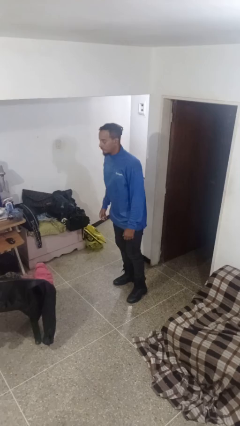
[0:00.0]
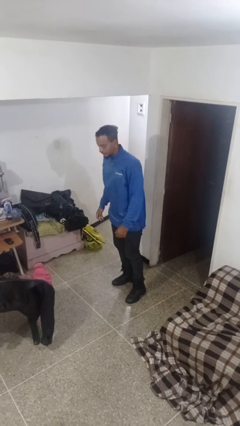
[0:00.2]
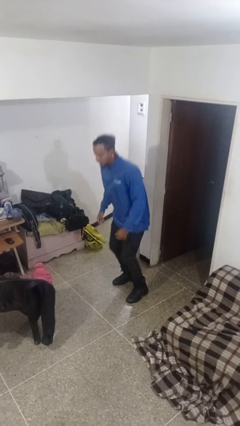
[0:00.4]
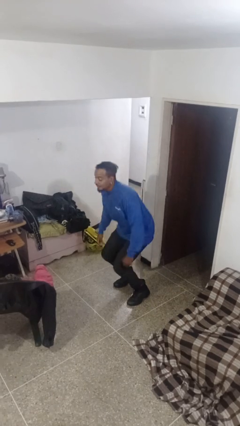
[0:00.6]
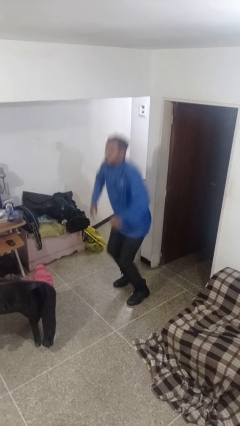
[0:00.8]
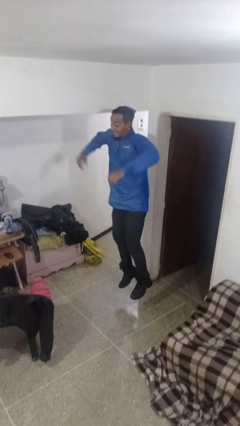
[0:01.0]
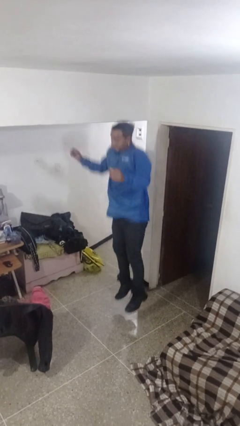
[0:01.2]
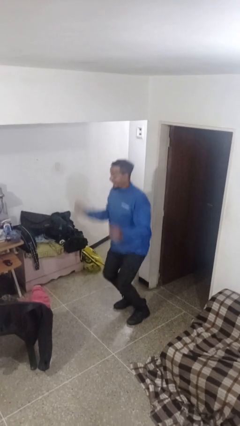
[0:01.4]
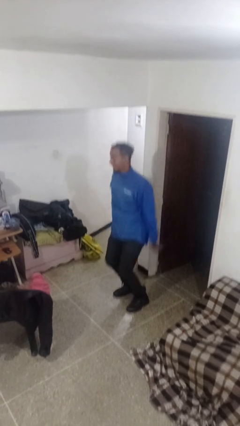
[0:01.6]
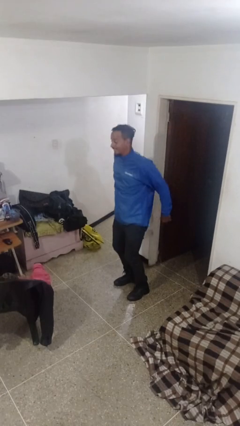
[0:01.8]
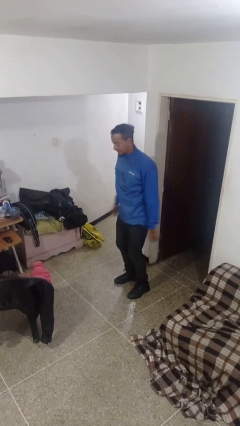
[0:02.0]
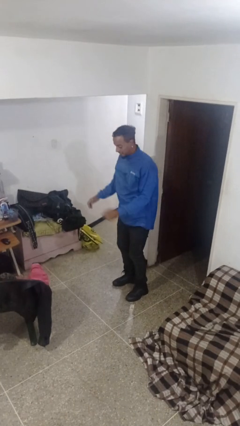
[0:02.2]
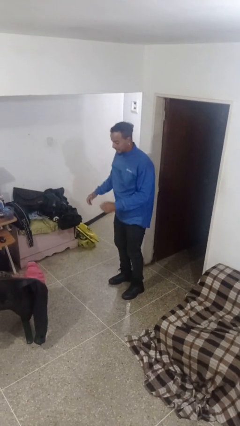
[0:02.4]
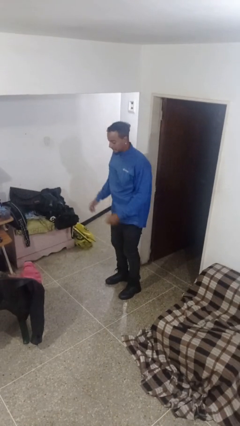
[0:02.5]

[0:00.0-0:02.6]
person jumps

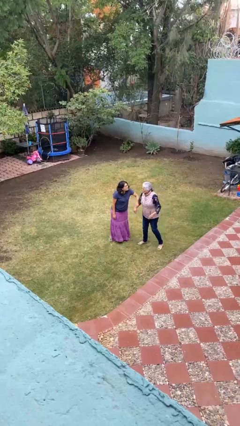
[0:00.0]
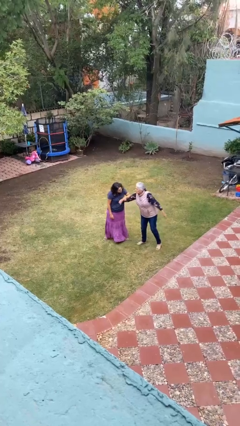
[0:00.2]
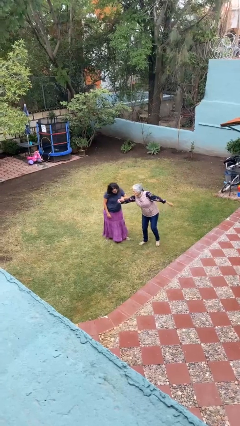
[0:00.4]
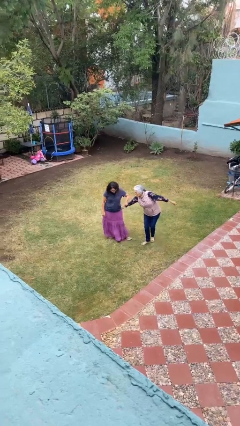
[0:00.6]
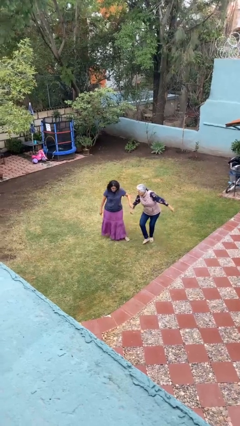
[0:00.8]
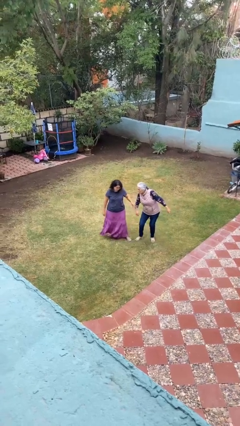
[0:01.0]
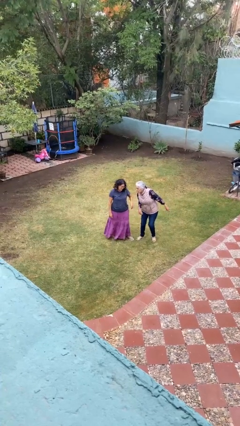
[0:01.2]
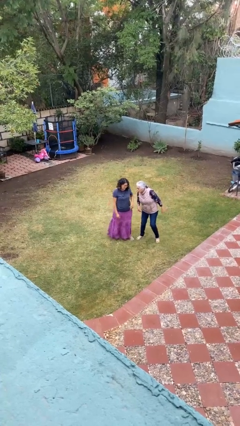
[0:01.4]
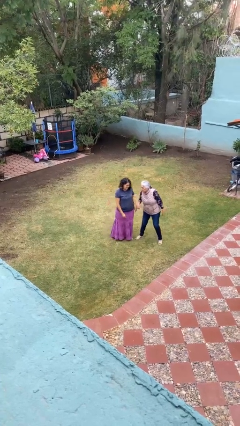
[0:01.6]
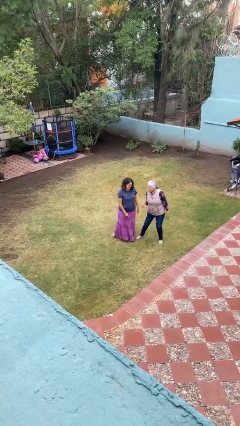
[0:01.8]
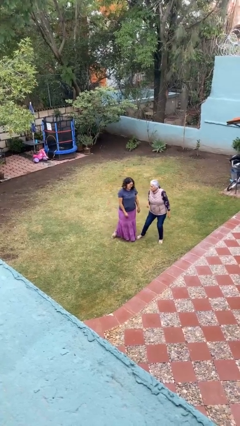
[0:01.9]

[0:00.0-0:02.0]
person grabs person by forearm

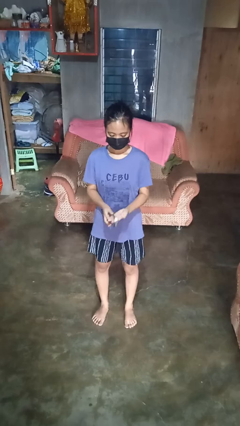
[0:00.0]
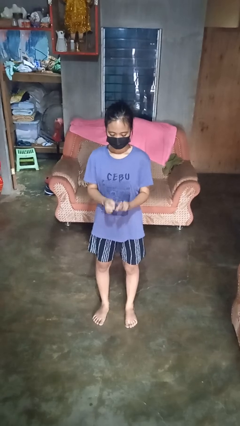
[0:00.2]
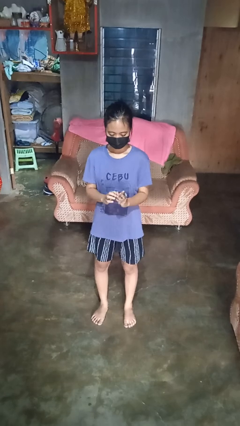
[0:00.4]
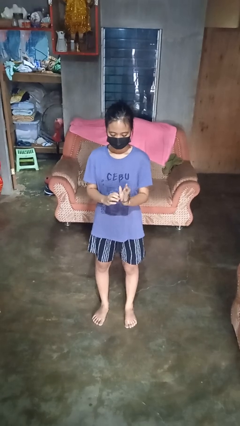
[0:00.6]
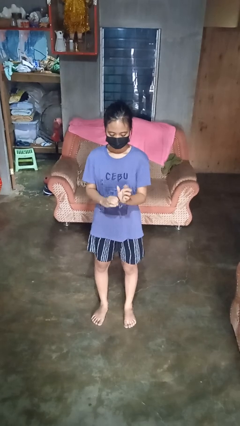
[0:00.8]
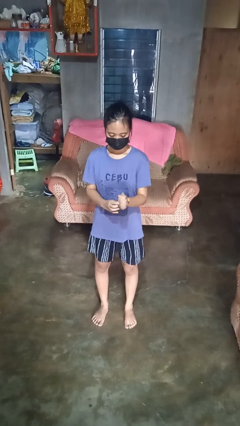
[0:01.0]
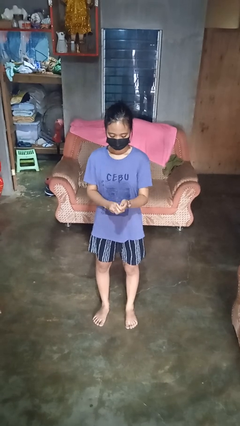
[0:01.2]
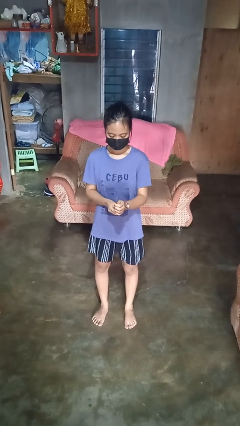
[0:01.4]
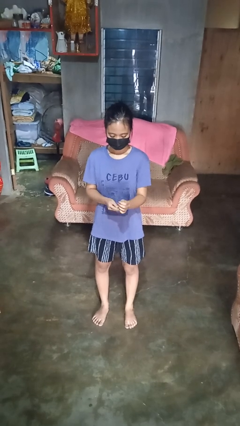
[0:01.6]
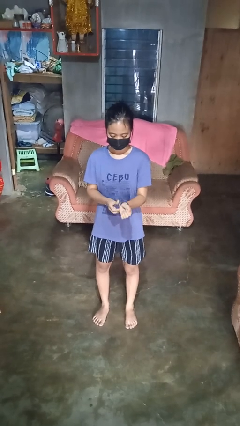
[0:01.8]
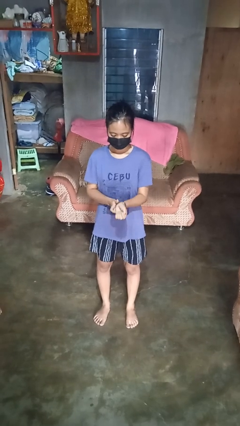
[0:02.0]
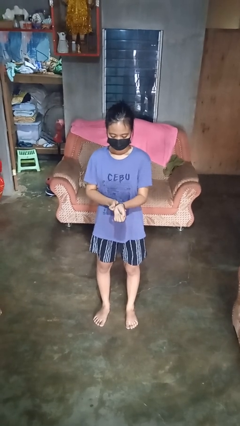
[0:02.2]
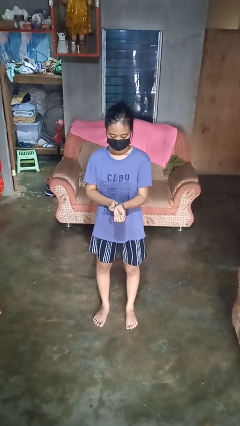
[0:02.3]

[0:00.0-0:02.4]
person puts on wristwatch

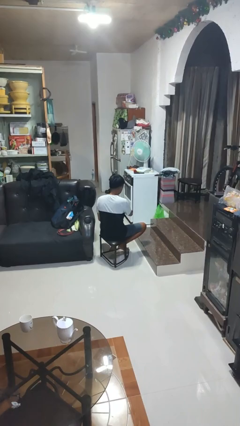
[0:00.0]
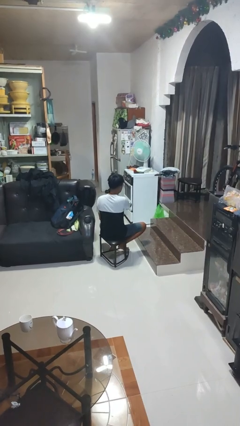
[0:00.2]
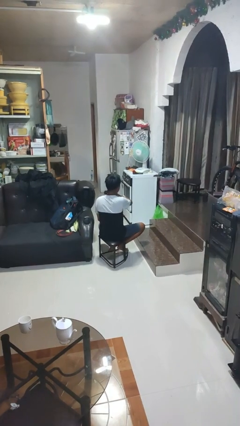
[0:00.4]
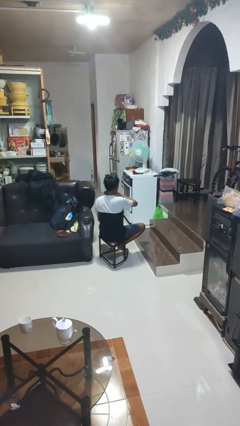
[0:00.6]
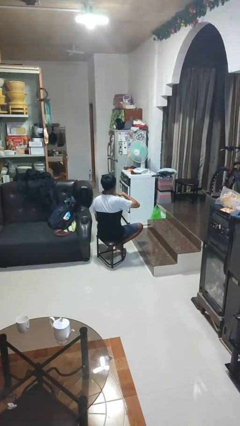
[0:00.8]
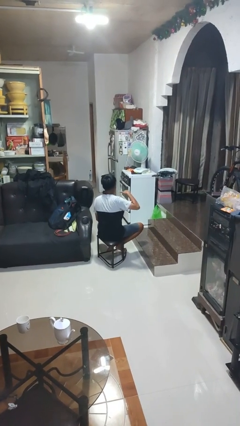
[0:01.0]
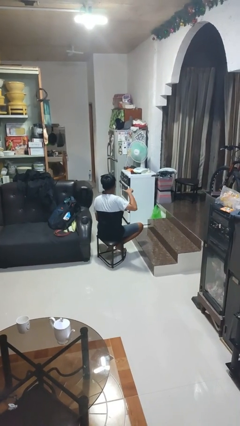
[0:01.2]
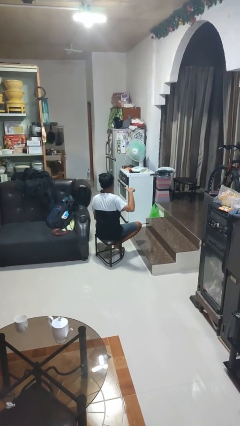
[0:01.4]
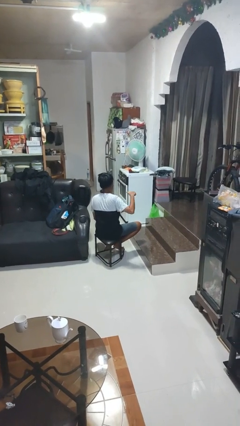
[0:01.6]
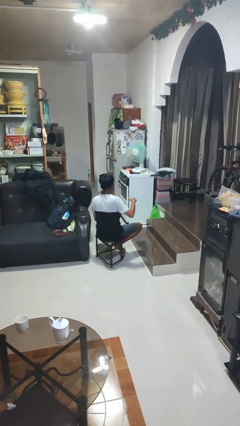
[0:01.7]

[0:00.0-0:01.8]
person gestures cut

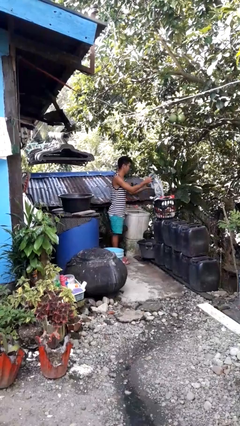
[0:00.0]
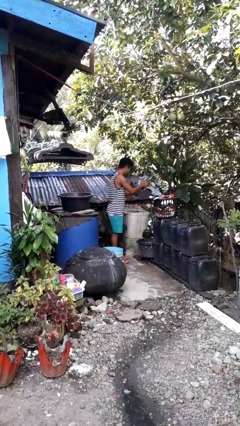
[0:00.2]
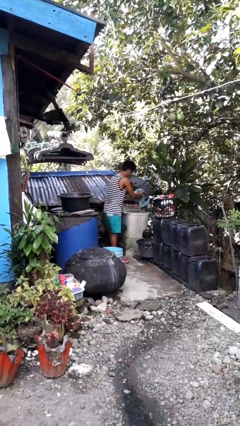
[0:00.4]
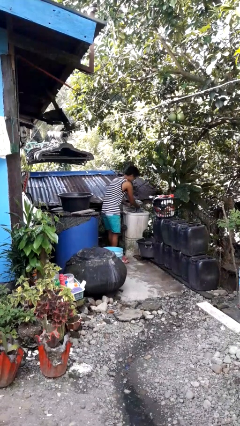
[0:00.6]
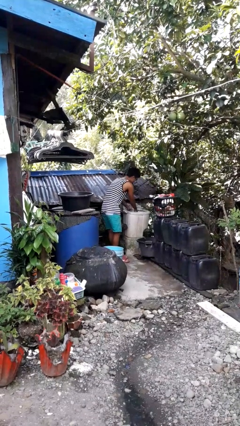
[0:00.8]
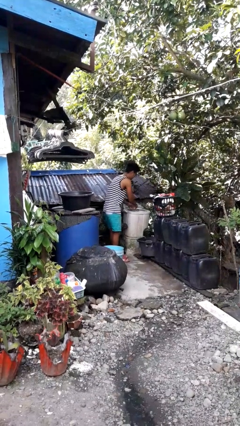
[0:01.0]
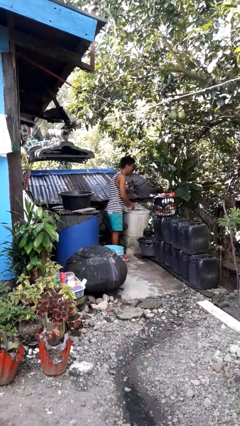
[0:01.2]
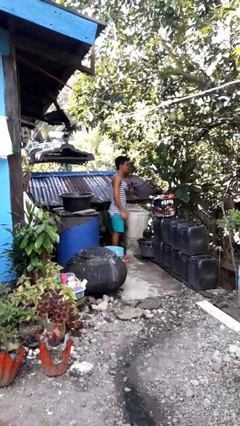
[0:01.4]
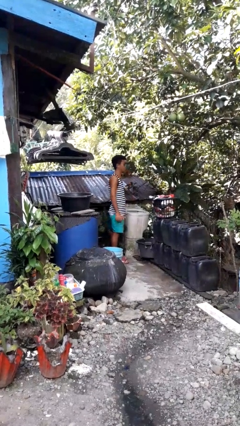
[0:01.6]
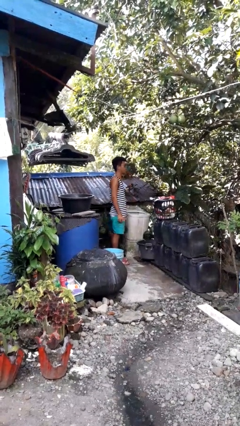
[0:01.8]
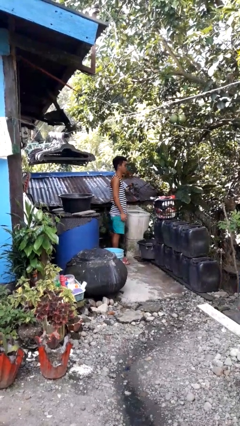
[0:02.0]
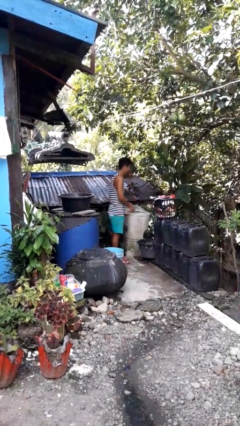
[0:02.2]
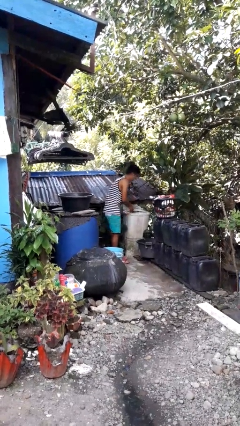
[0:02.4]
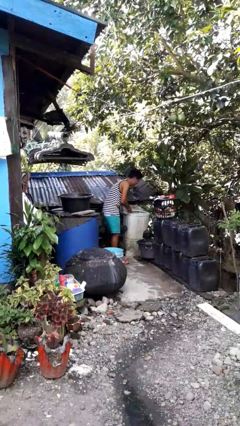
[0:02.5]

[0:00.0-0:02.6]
person loads dryer

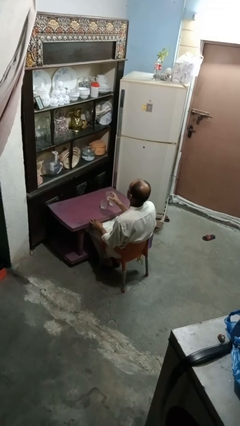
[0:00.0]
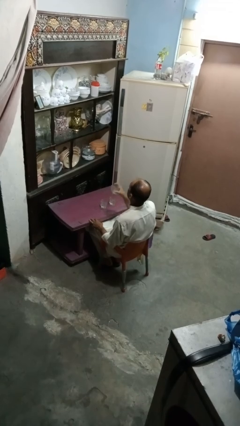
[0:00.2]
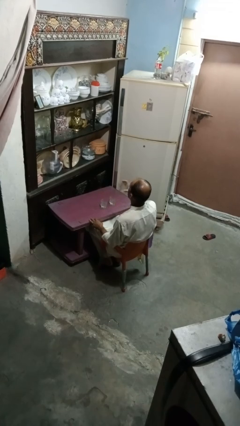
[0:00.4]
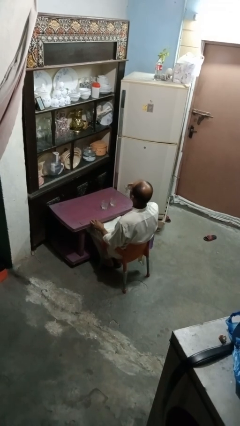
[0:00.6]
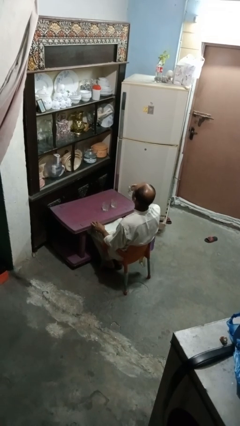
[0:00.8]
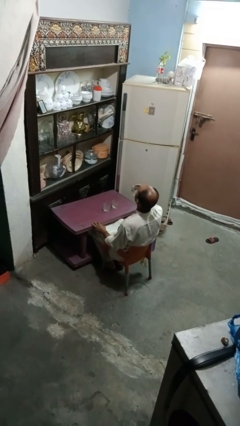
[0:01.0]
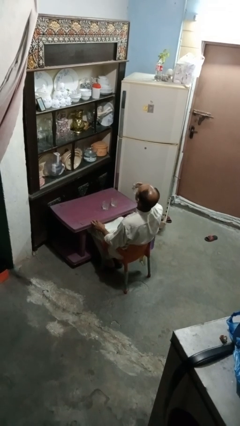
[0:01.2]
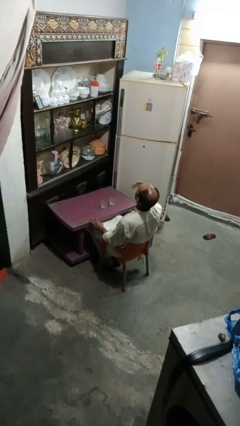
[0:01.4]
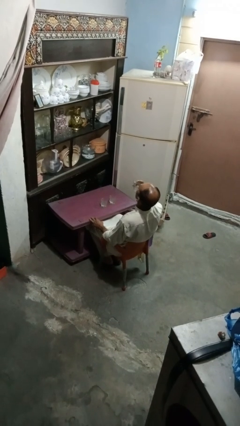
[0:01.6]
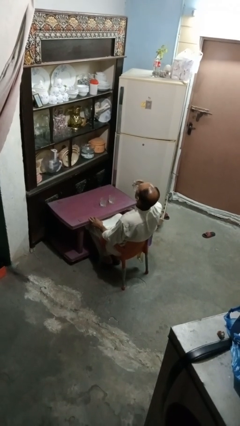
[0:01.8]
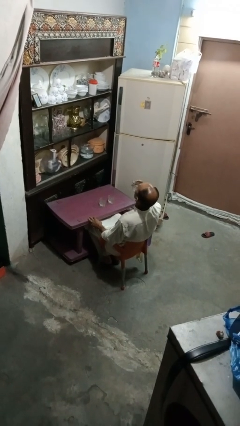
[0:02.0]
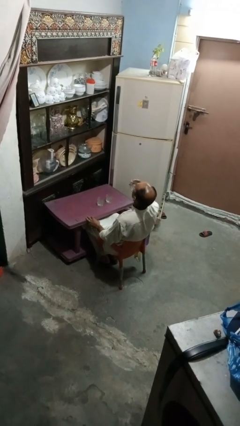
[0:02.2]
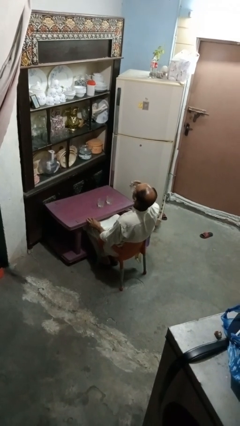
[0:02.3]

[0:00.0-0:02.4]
person drinks from shotglass

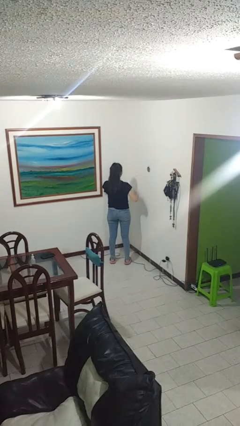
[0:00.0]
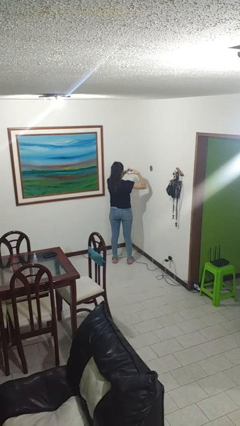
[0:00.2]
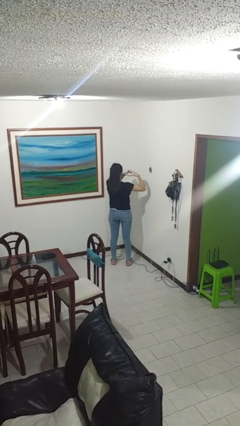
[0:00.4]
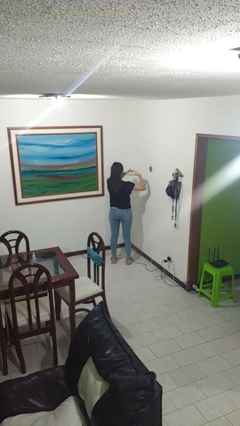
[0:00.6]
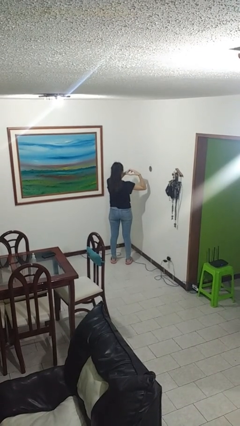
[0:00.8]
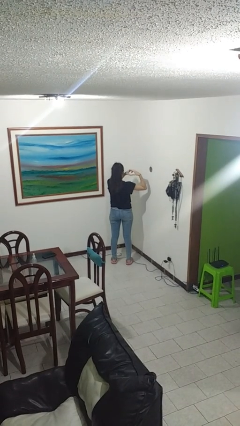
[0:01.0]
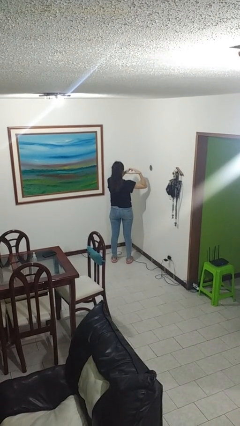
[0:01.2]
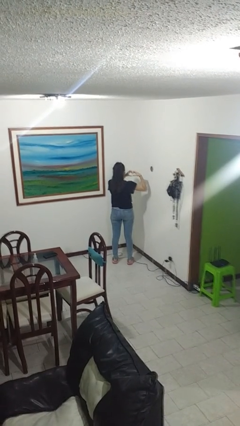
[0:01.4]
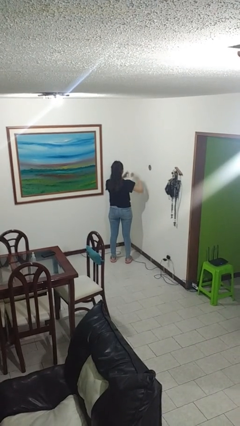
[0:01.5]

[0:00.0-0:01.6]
person gestures heart

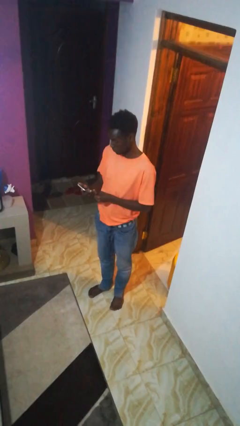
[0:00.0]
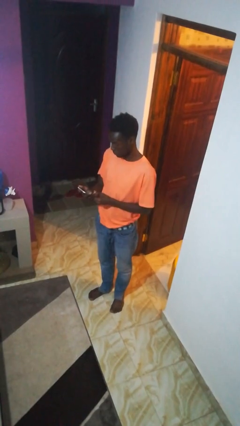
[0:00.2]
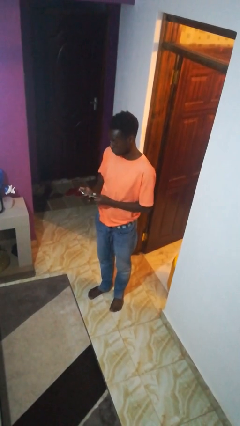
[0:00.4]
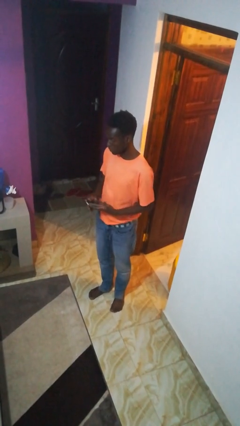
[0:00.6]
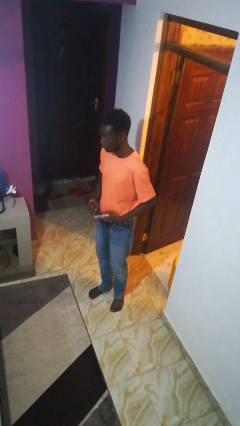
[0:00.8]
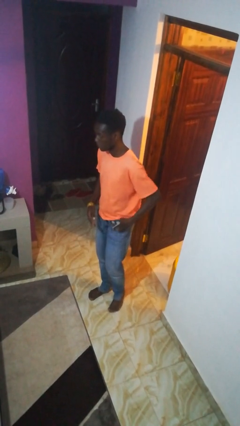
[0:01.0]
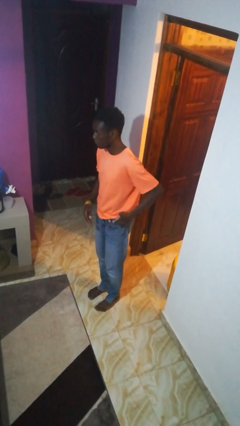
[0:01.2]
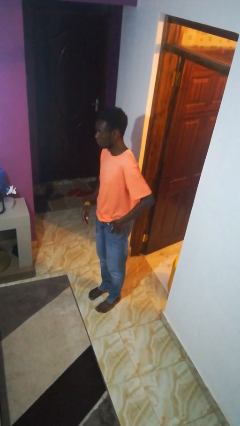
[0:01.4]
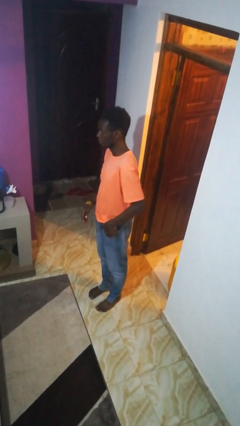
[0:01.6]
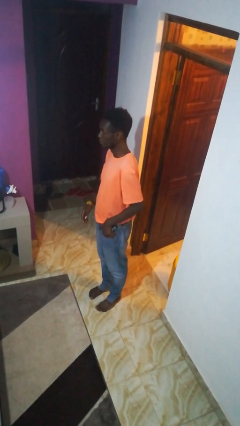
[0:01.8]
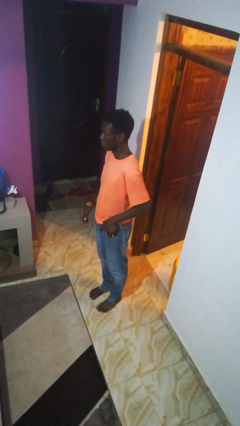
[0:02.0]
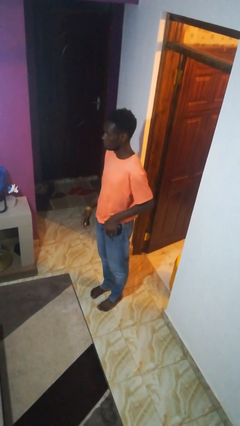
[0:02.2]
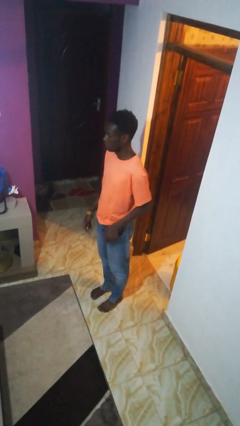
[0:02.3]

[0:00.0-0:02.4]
person puts phone into pocket
